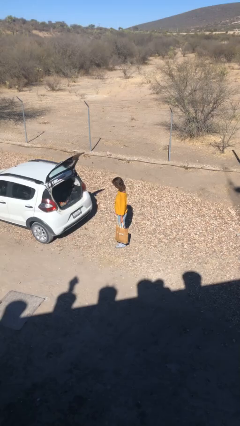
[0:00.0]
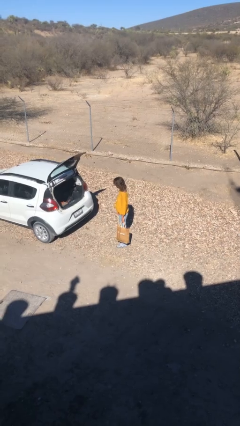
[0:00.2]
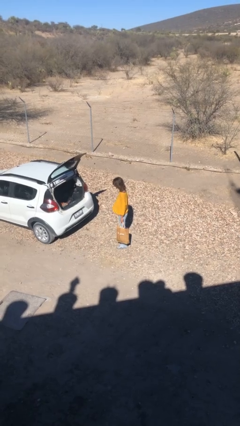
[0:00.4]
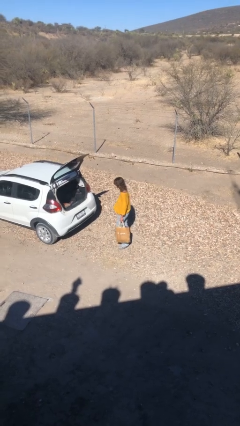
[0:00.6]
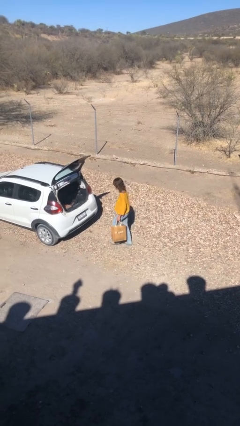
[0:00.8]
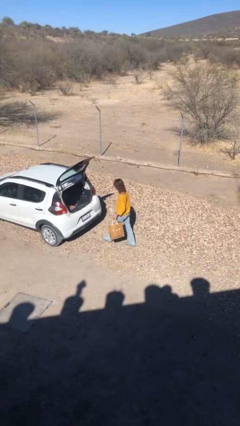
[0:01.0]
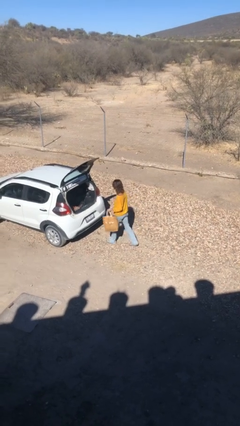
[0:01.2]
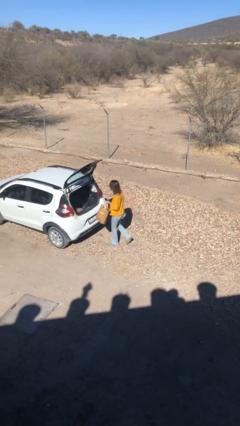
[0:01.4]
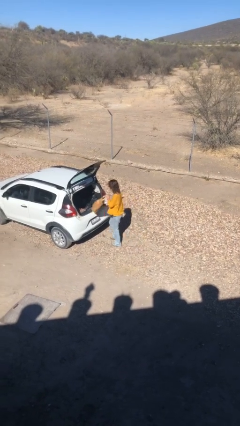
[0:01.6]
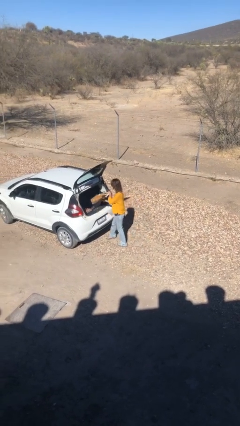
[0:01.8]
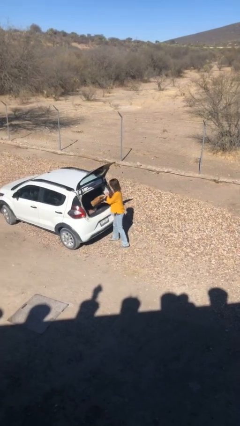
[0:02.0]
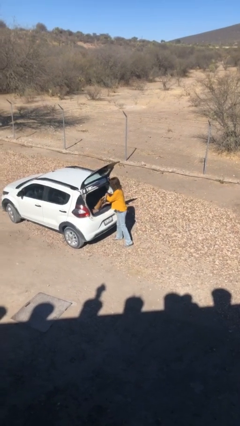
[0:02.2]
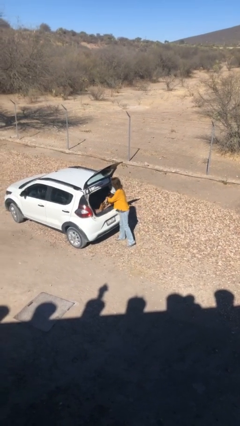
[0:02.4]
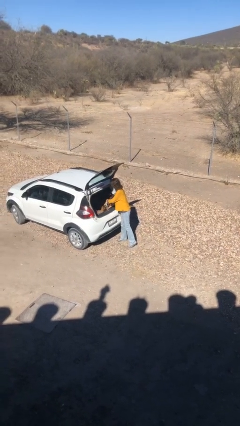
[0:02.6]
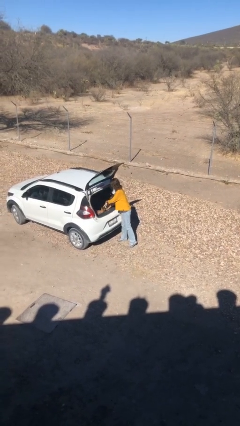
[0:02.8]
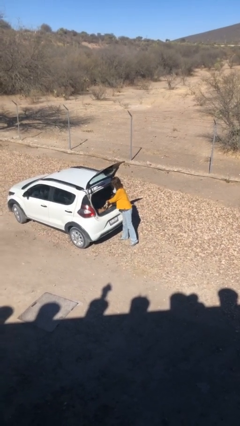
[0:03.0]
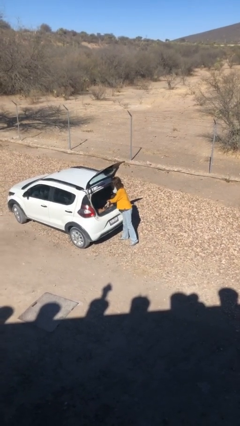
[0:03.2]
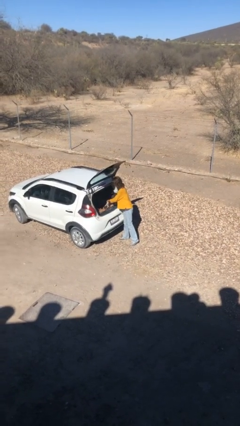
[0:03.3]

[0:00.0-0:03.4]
person loads car

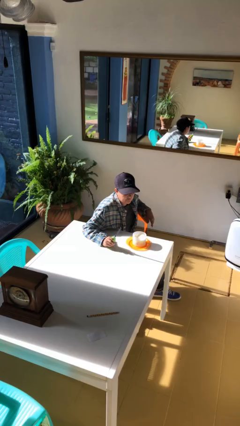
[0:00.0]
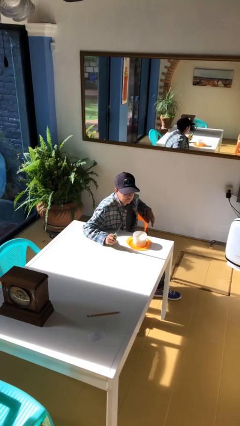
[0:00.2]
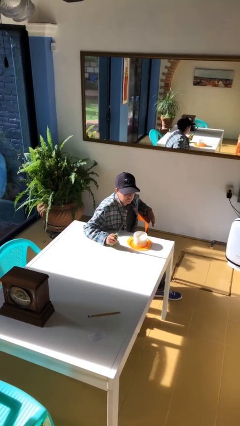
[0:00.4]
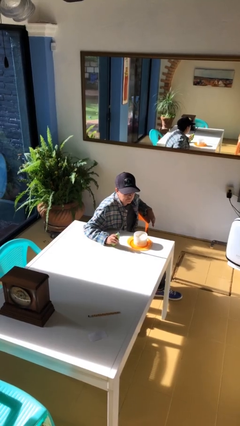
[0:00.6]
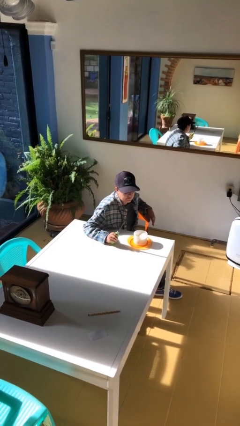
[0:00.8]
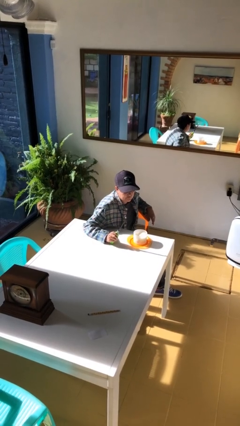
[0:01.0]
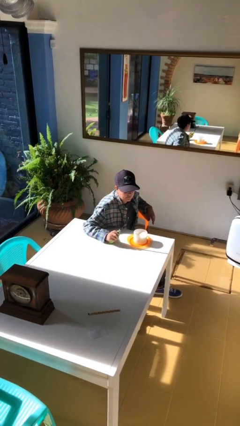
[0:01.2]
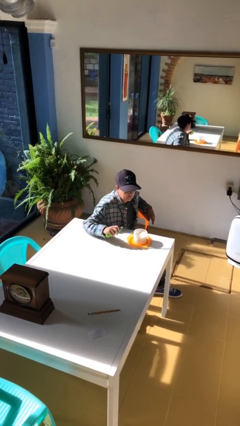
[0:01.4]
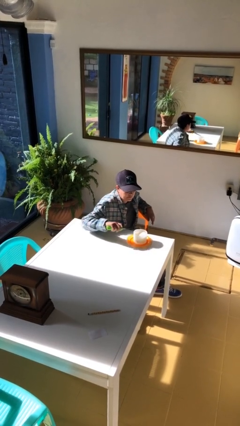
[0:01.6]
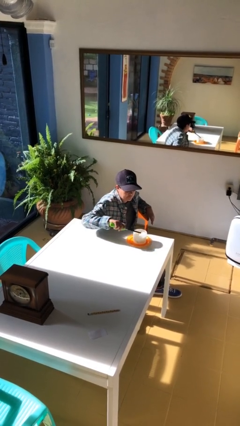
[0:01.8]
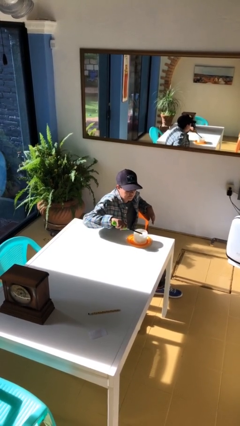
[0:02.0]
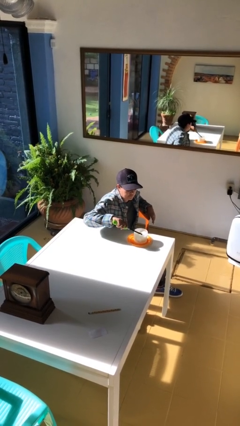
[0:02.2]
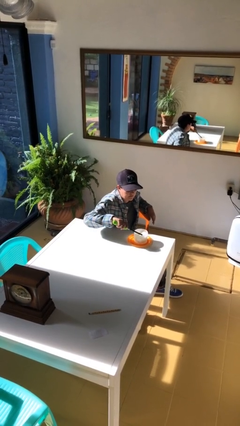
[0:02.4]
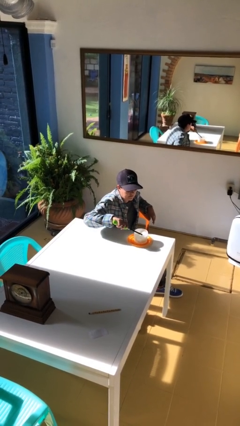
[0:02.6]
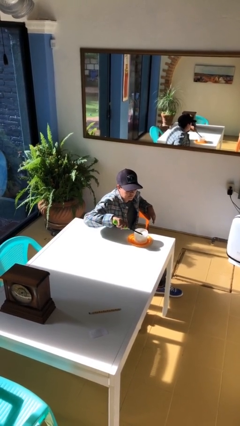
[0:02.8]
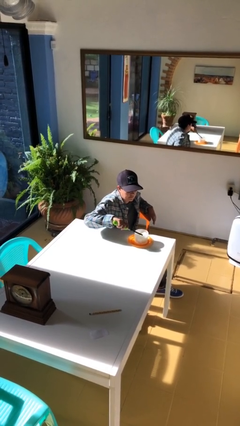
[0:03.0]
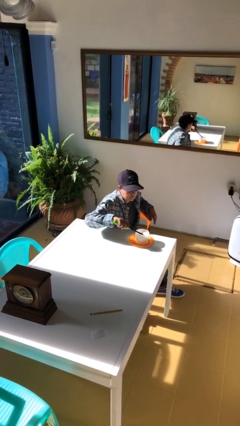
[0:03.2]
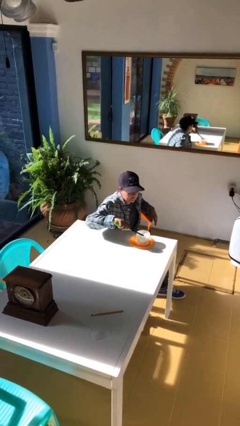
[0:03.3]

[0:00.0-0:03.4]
person lights candle

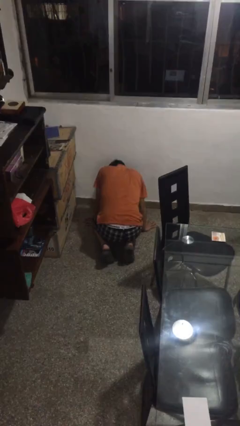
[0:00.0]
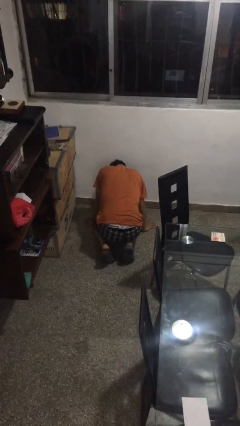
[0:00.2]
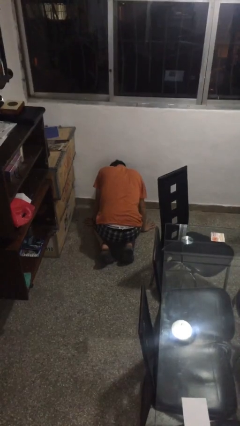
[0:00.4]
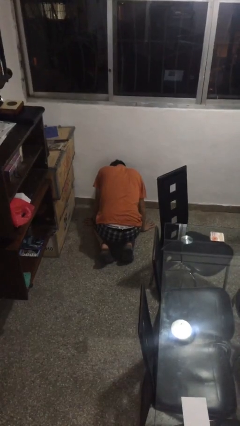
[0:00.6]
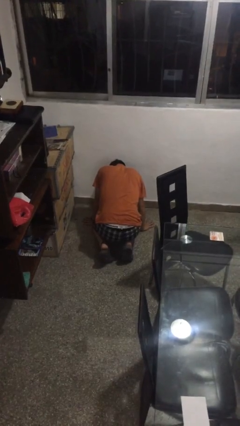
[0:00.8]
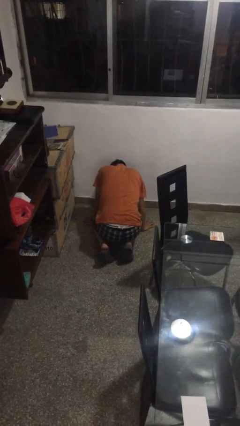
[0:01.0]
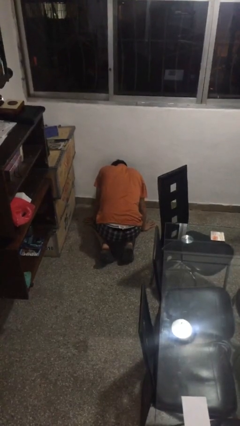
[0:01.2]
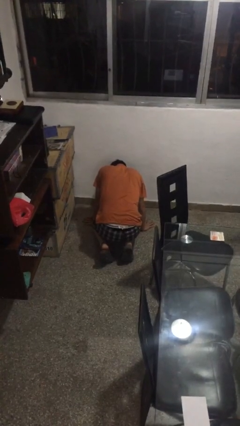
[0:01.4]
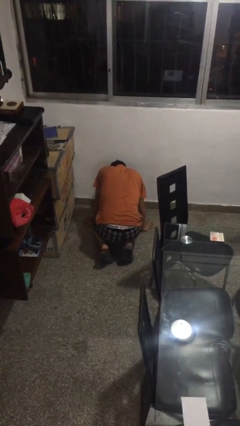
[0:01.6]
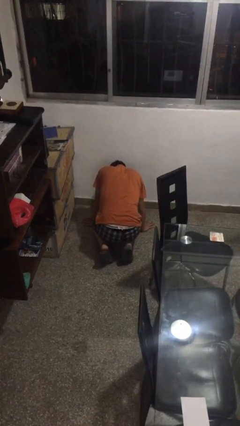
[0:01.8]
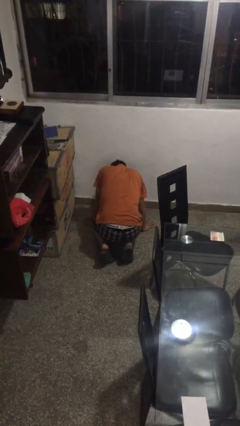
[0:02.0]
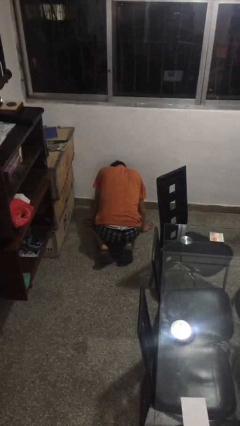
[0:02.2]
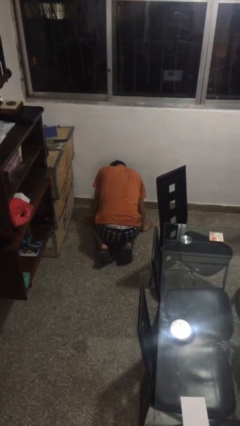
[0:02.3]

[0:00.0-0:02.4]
person lies down on floor

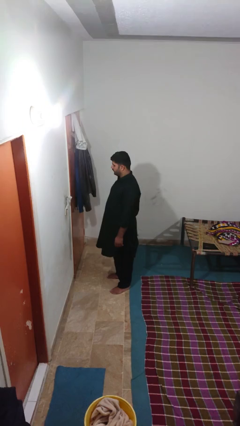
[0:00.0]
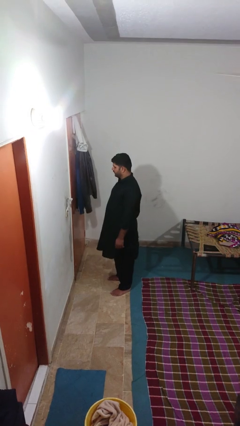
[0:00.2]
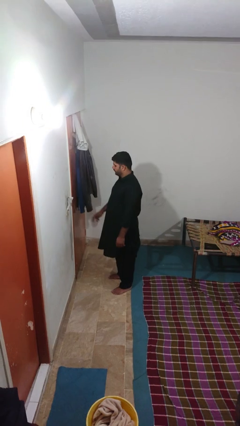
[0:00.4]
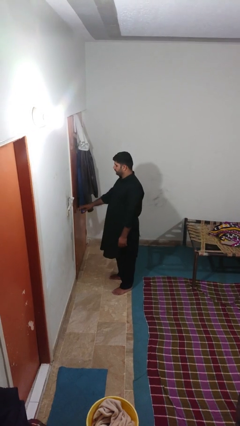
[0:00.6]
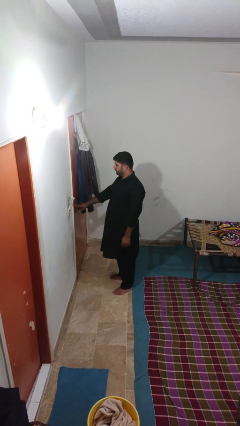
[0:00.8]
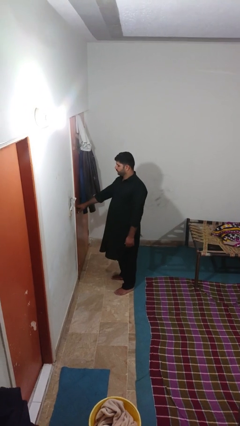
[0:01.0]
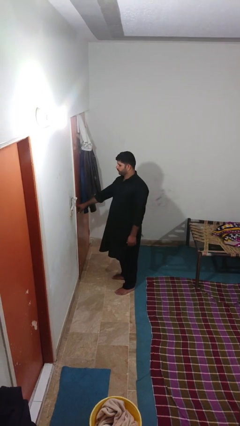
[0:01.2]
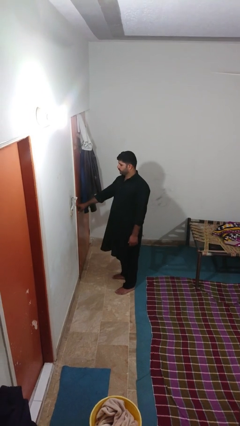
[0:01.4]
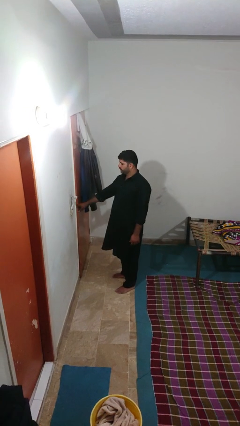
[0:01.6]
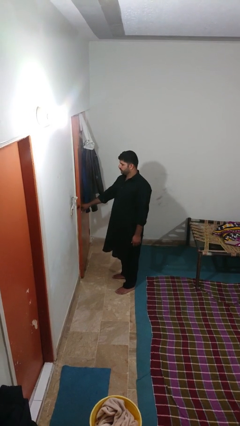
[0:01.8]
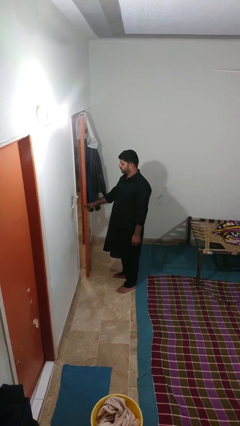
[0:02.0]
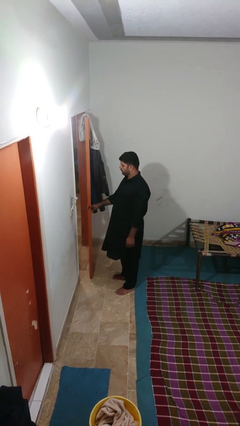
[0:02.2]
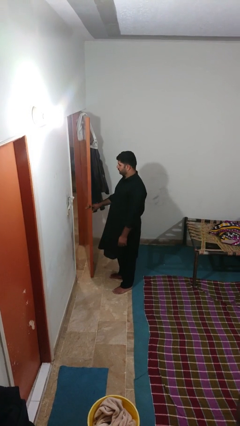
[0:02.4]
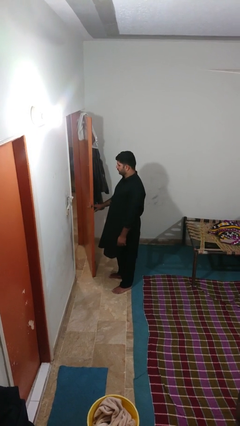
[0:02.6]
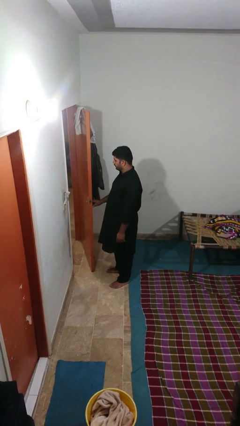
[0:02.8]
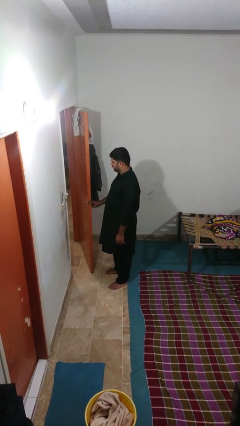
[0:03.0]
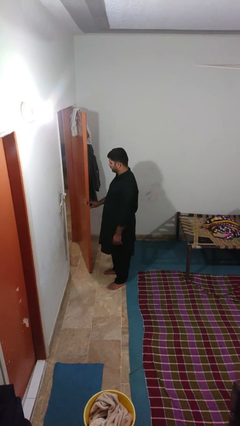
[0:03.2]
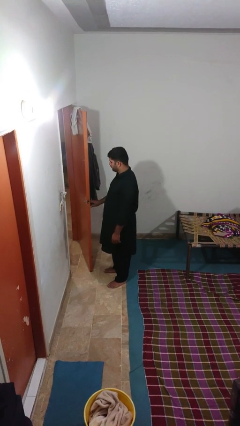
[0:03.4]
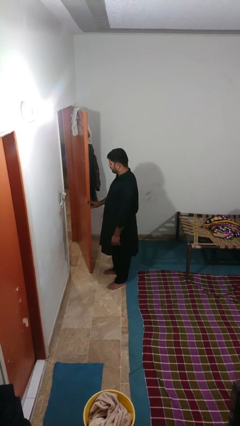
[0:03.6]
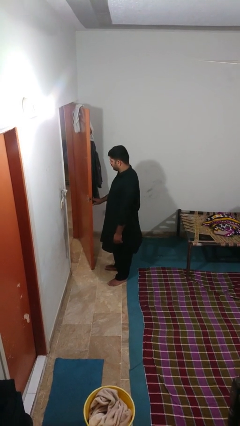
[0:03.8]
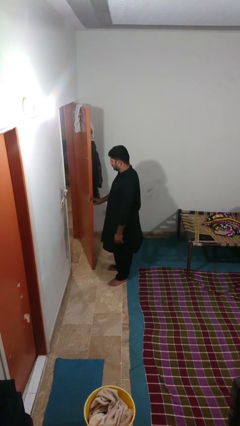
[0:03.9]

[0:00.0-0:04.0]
person opens facility door

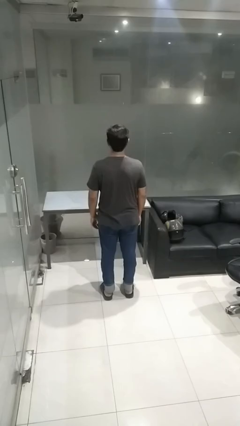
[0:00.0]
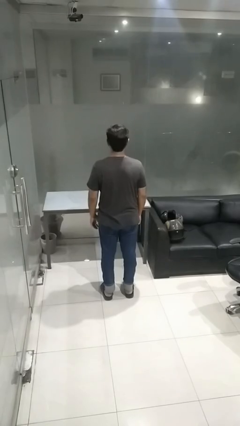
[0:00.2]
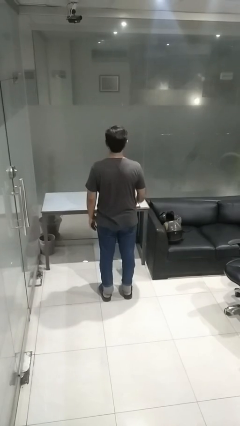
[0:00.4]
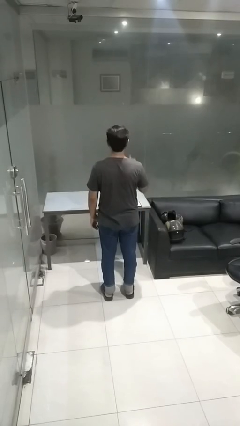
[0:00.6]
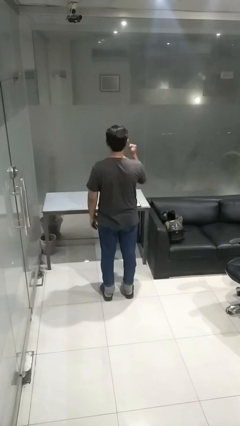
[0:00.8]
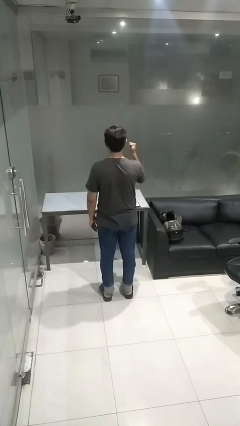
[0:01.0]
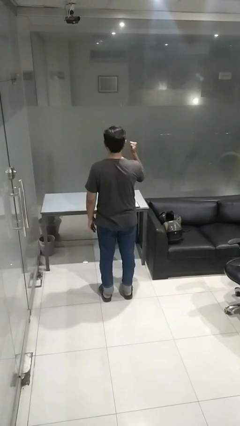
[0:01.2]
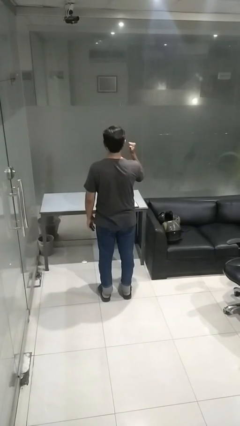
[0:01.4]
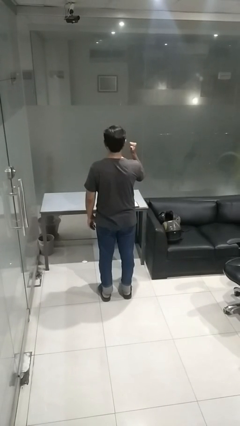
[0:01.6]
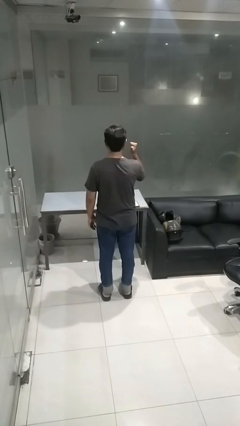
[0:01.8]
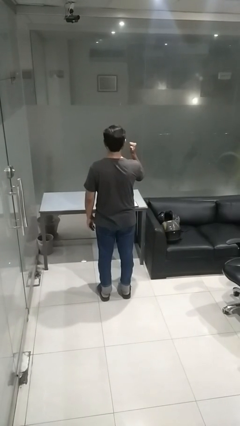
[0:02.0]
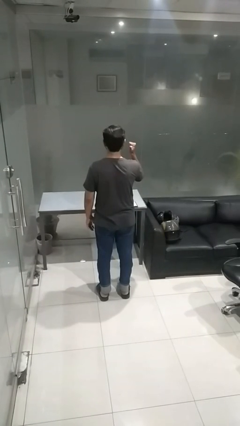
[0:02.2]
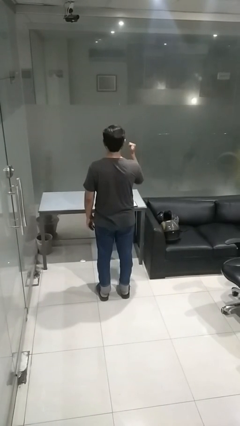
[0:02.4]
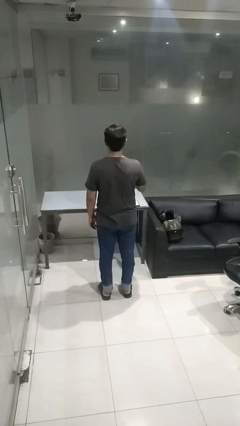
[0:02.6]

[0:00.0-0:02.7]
person gestures behind me

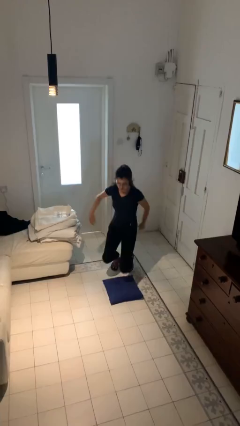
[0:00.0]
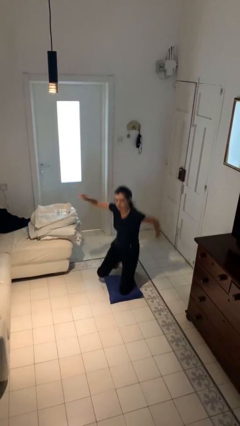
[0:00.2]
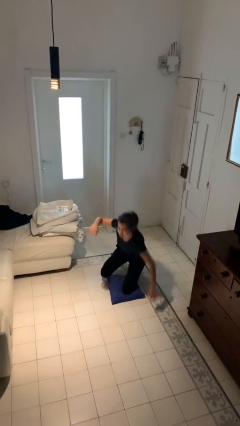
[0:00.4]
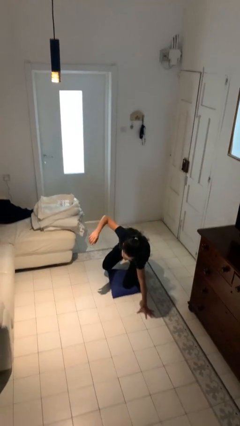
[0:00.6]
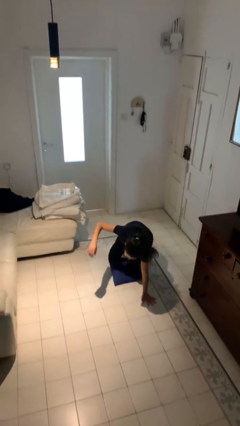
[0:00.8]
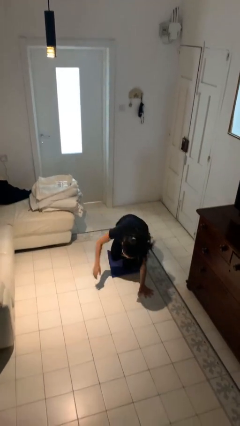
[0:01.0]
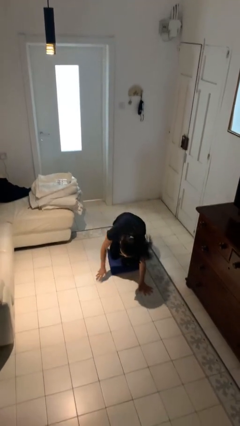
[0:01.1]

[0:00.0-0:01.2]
person trips on object on floor

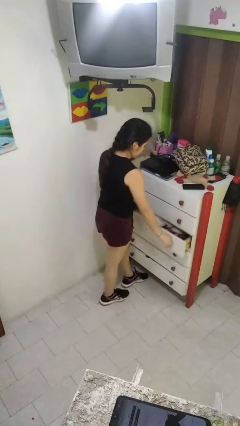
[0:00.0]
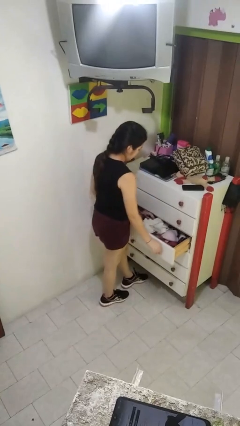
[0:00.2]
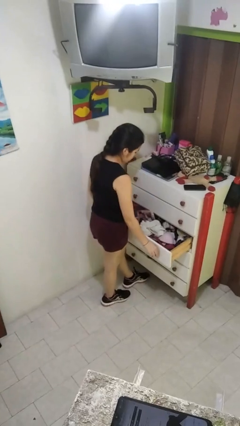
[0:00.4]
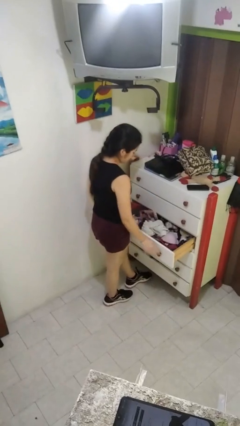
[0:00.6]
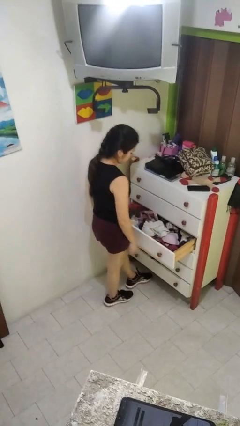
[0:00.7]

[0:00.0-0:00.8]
person opens dresser drawer
